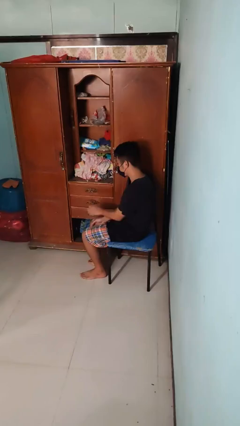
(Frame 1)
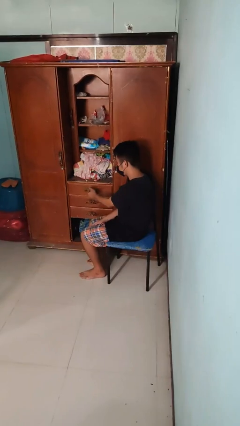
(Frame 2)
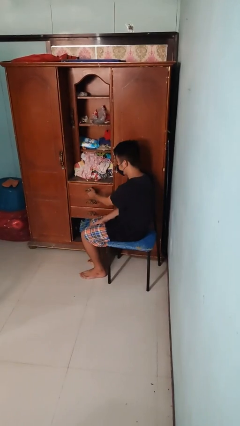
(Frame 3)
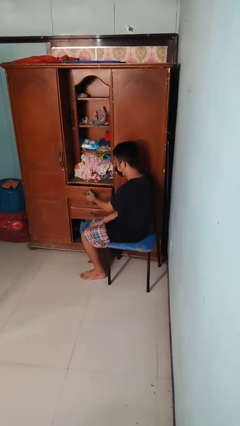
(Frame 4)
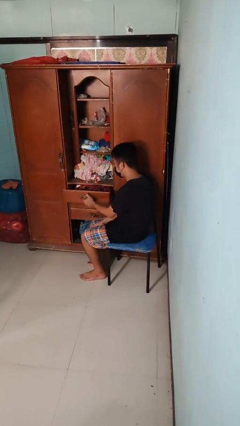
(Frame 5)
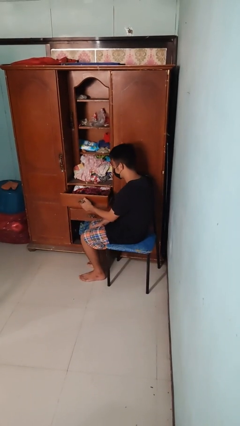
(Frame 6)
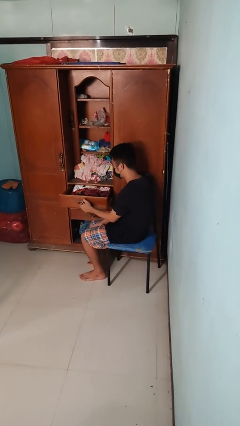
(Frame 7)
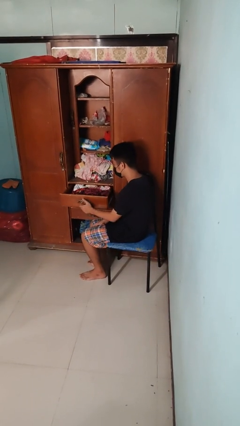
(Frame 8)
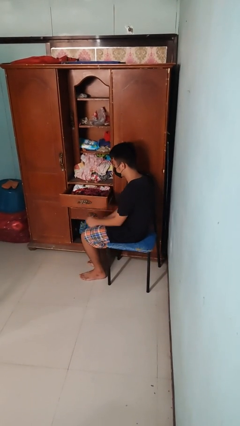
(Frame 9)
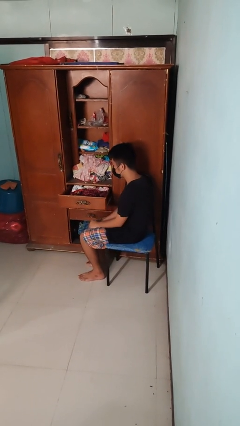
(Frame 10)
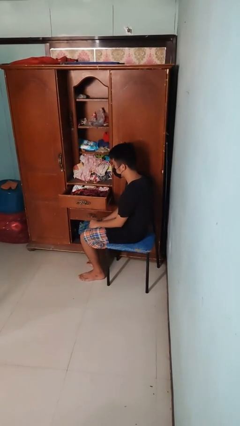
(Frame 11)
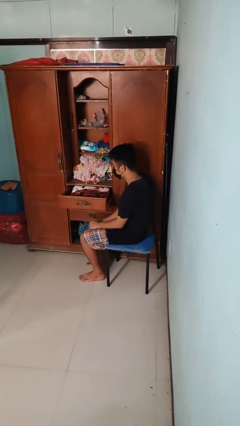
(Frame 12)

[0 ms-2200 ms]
person opens dresser drawer

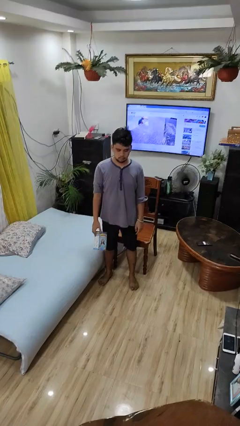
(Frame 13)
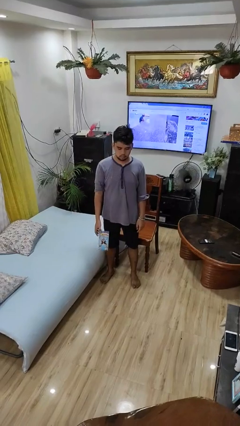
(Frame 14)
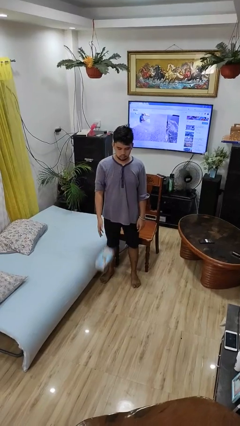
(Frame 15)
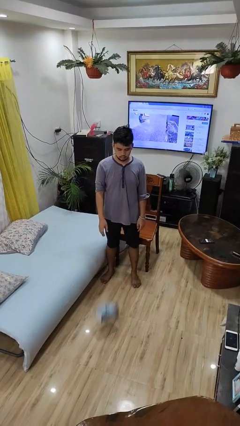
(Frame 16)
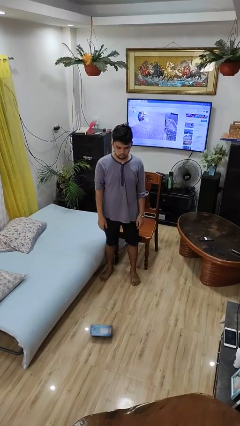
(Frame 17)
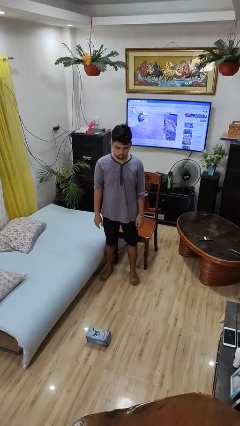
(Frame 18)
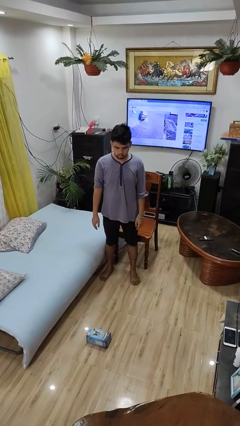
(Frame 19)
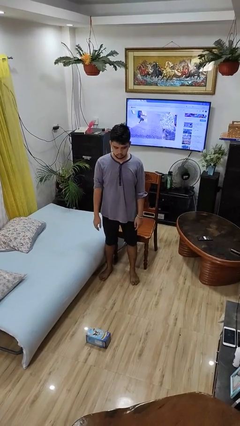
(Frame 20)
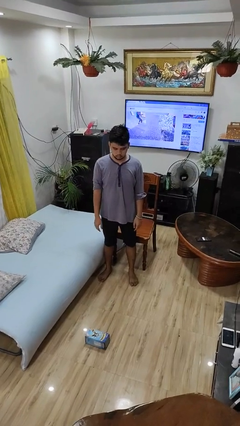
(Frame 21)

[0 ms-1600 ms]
person throws object to ground

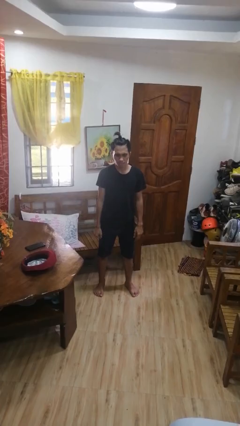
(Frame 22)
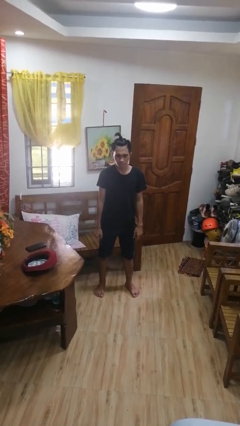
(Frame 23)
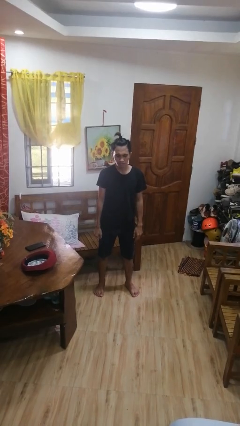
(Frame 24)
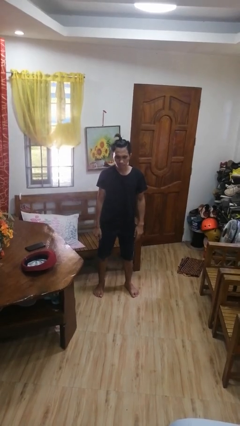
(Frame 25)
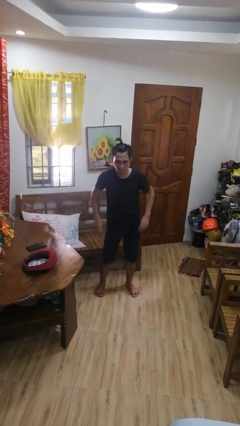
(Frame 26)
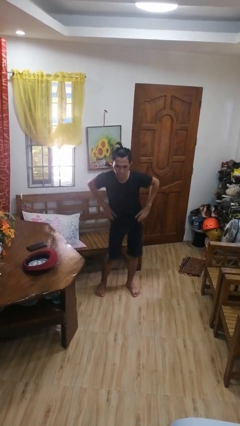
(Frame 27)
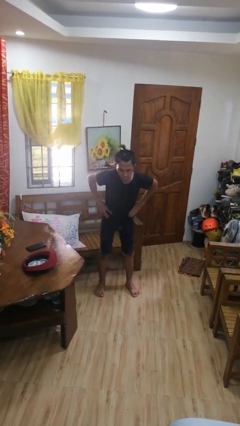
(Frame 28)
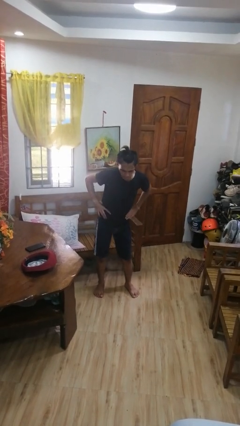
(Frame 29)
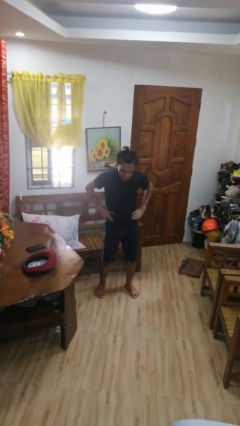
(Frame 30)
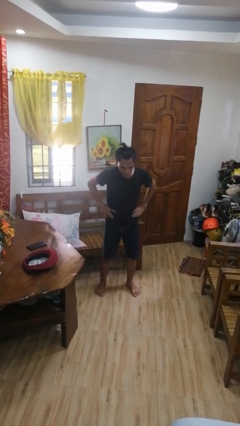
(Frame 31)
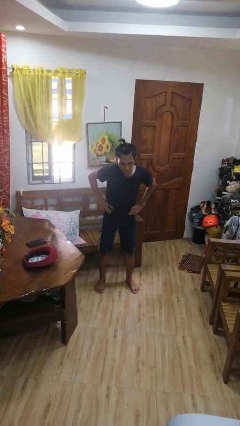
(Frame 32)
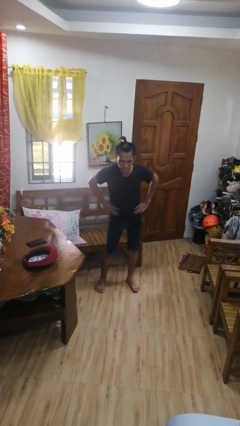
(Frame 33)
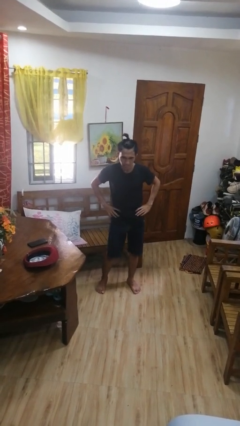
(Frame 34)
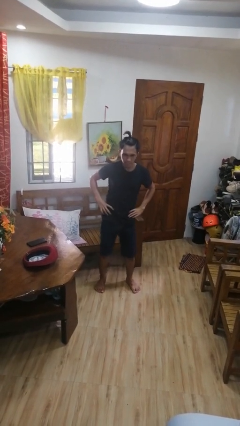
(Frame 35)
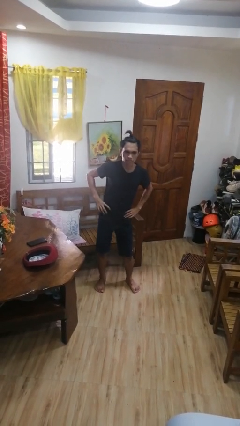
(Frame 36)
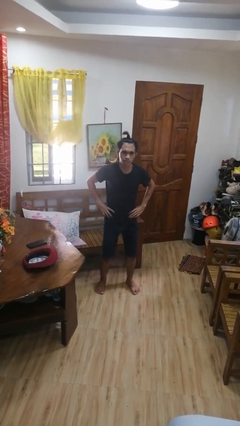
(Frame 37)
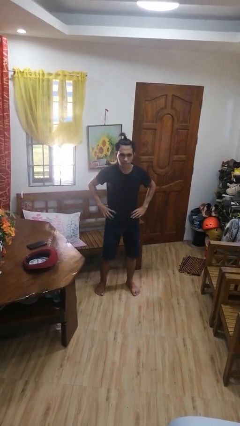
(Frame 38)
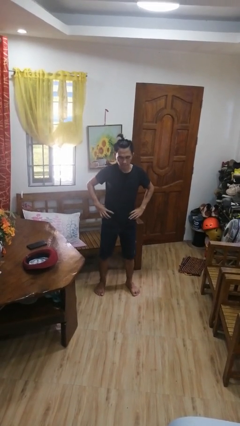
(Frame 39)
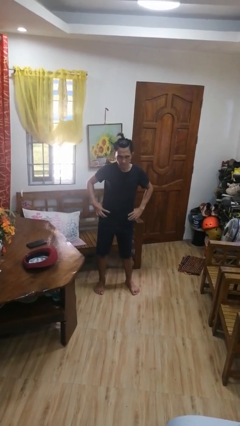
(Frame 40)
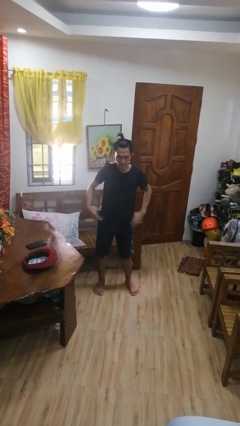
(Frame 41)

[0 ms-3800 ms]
person wiggles hips

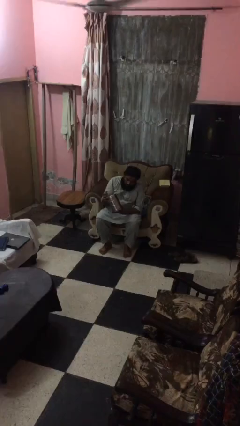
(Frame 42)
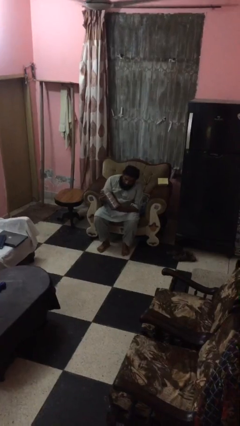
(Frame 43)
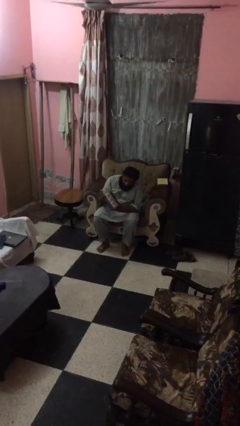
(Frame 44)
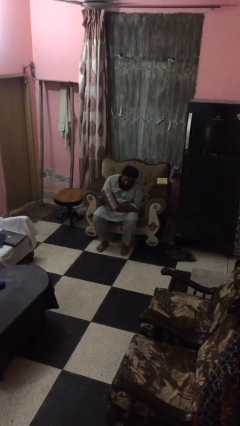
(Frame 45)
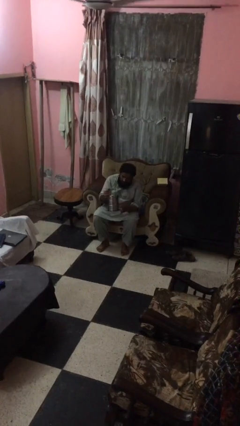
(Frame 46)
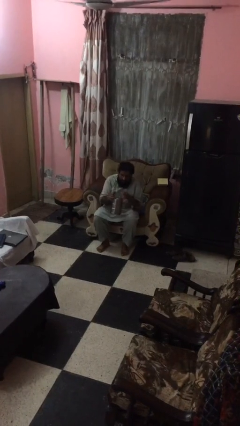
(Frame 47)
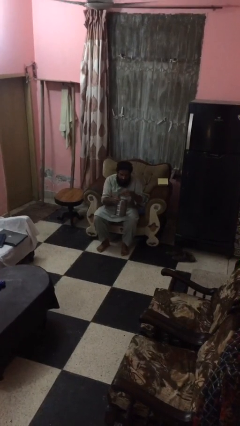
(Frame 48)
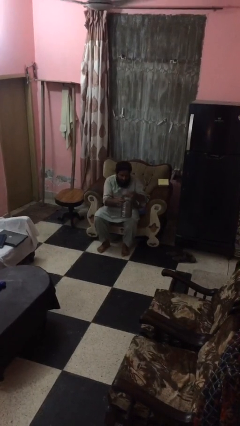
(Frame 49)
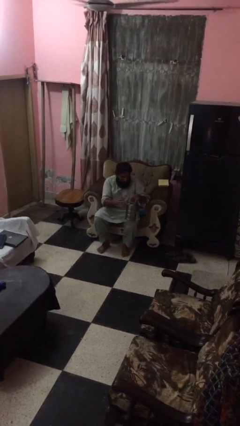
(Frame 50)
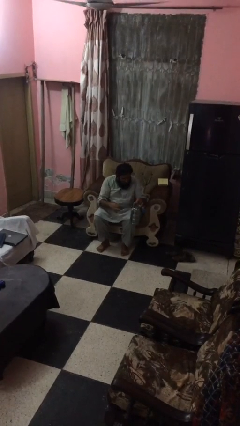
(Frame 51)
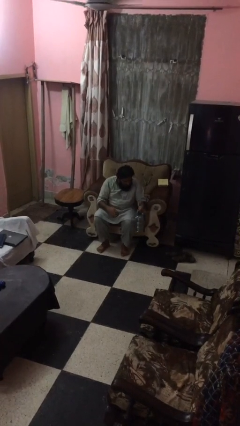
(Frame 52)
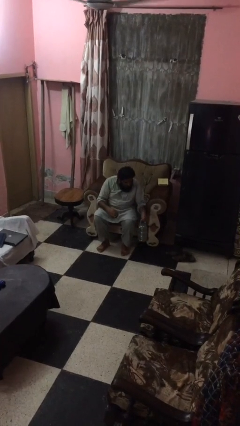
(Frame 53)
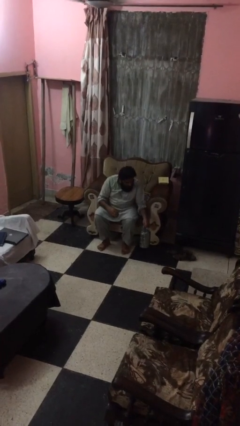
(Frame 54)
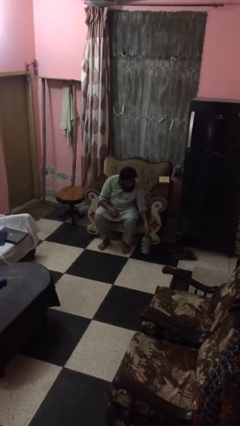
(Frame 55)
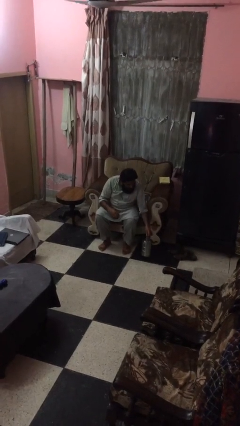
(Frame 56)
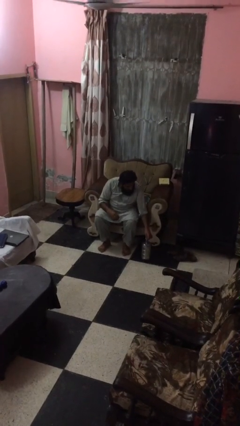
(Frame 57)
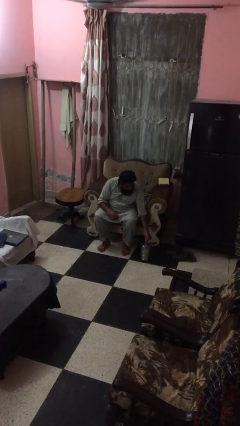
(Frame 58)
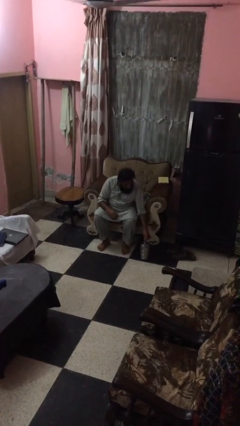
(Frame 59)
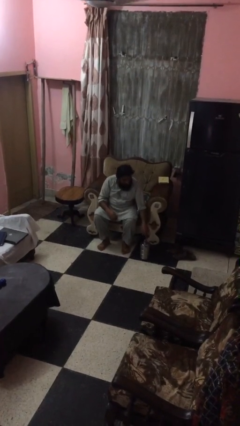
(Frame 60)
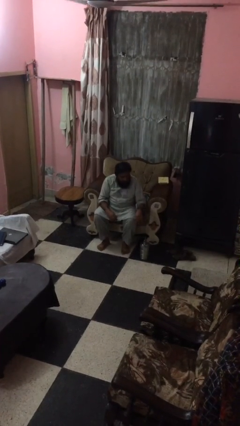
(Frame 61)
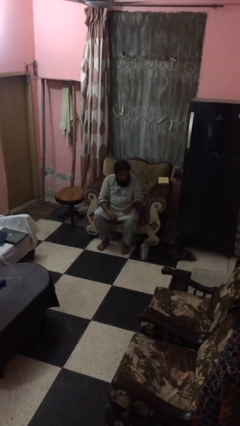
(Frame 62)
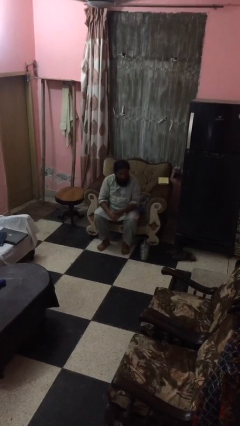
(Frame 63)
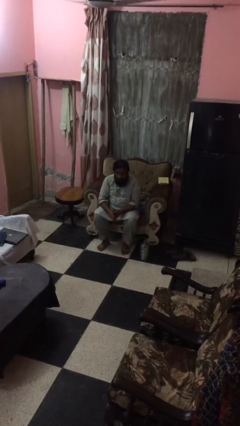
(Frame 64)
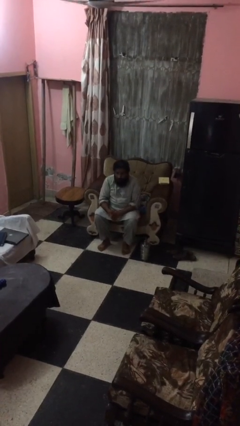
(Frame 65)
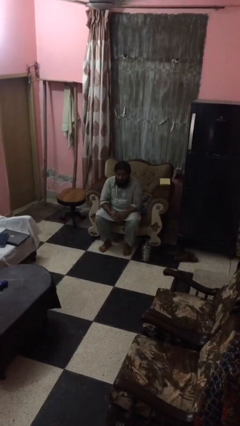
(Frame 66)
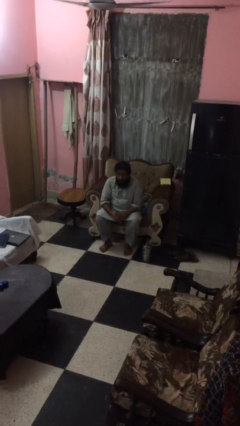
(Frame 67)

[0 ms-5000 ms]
person puts down object on floor

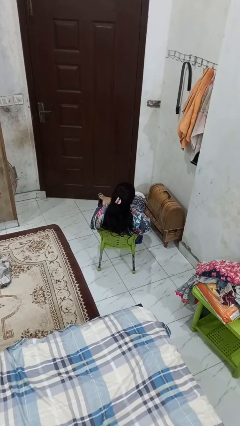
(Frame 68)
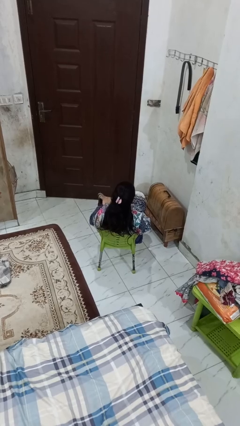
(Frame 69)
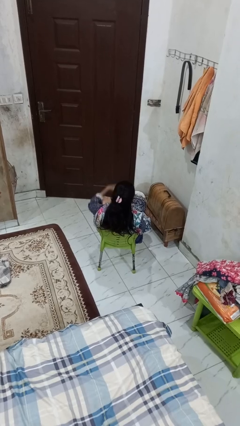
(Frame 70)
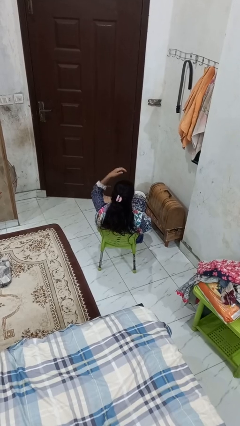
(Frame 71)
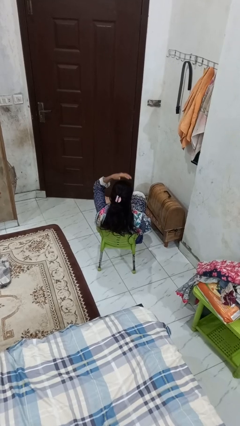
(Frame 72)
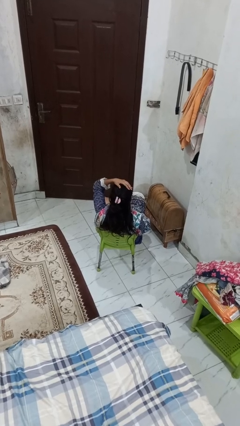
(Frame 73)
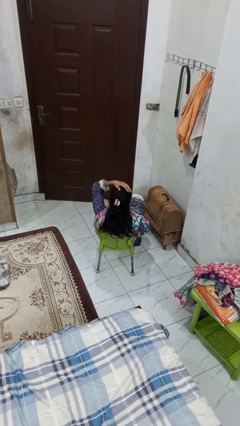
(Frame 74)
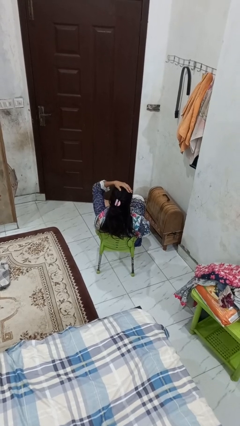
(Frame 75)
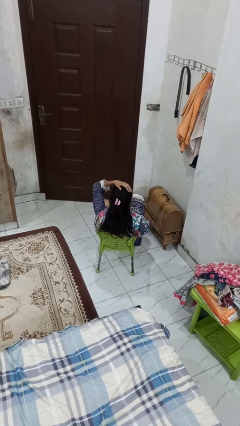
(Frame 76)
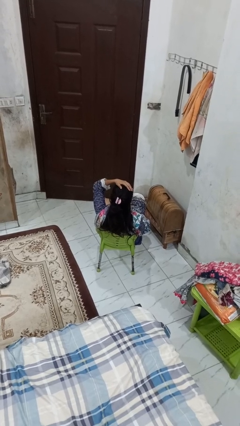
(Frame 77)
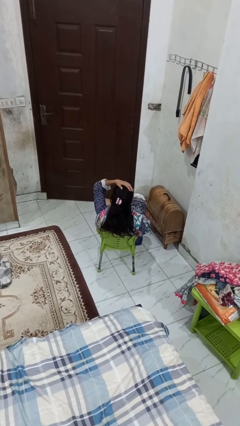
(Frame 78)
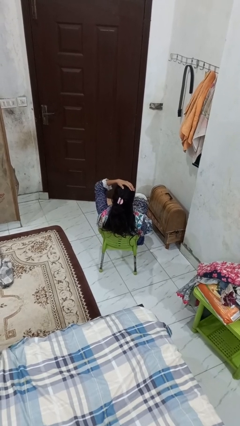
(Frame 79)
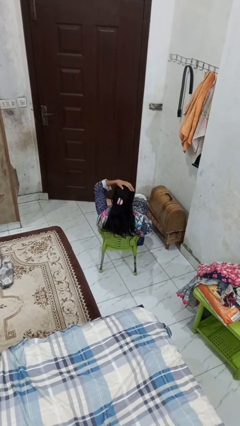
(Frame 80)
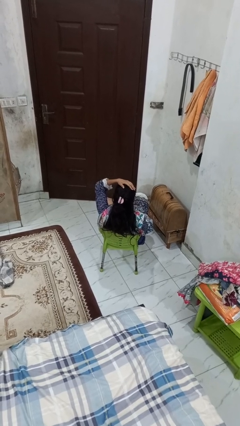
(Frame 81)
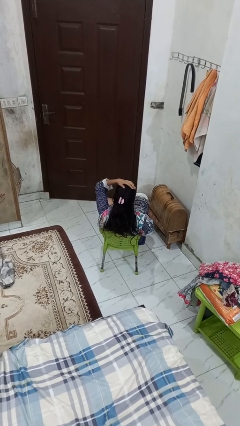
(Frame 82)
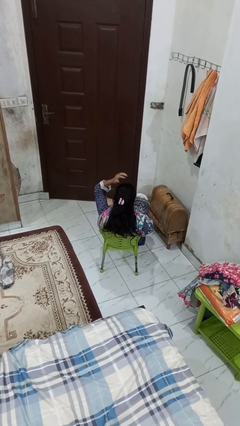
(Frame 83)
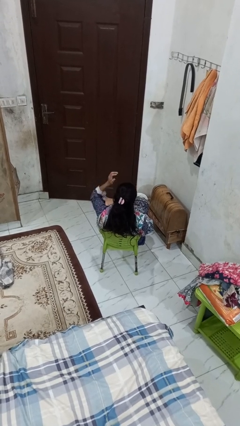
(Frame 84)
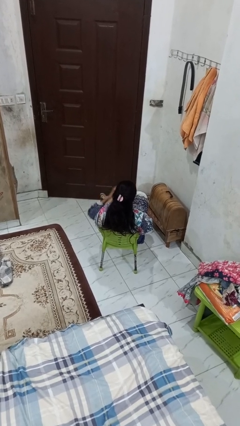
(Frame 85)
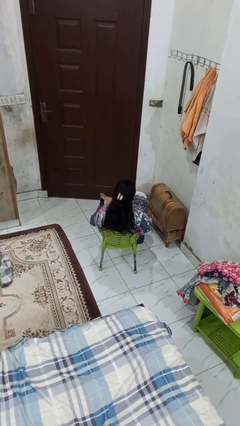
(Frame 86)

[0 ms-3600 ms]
person pats head

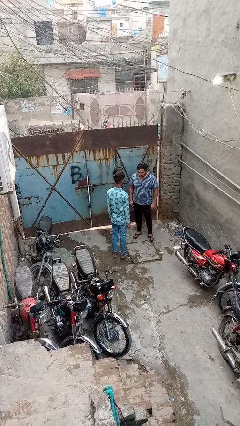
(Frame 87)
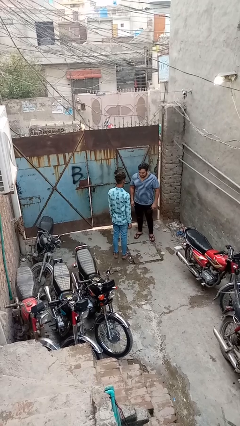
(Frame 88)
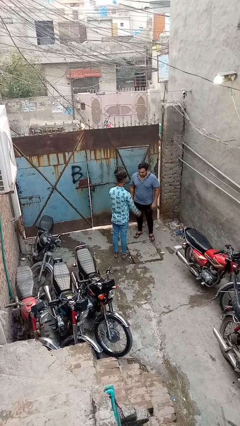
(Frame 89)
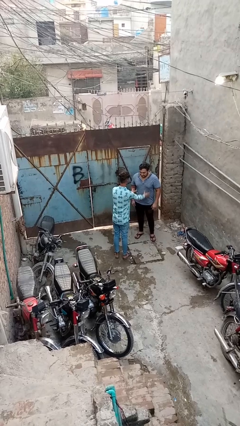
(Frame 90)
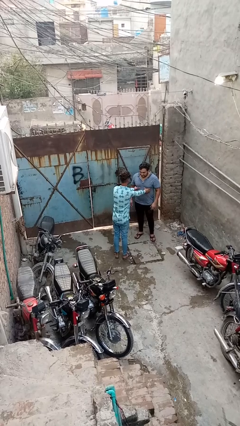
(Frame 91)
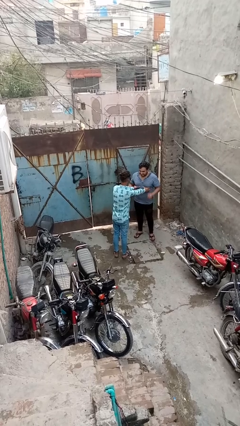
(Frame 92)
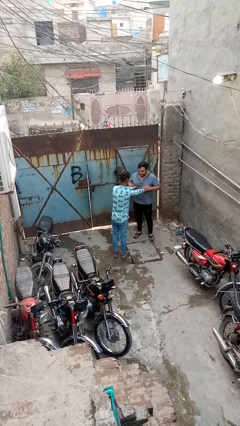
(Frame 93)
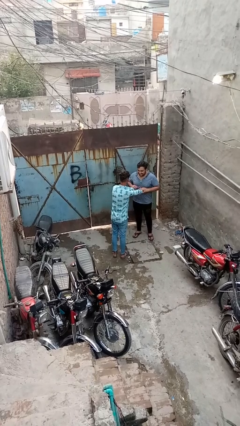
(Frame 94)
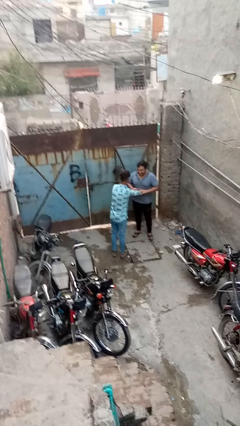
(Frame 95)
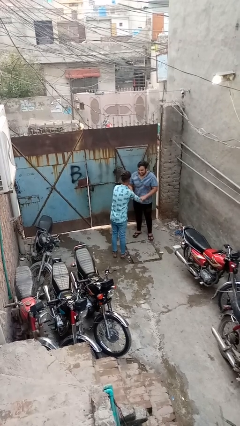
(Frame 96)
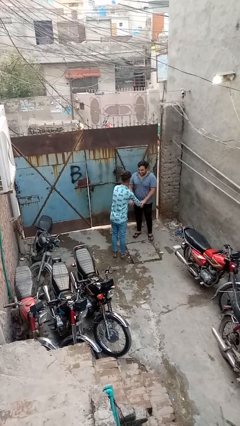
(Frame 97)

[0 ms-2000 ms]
person tickles person
